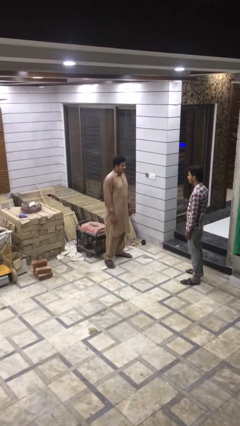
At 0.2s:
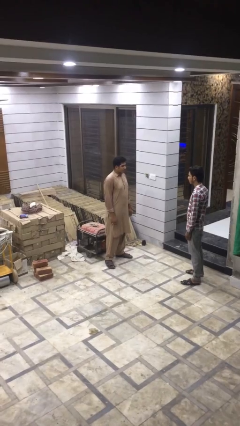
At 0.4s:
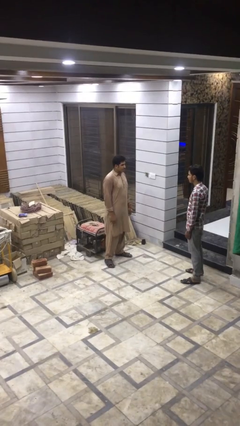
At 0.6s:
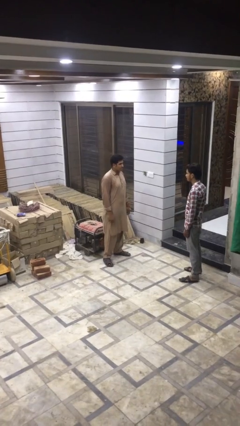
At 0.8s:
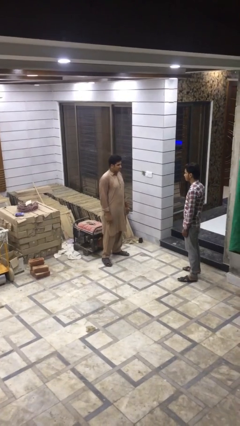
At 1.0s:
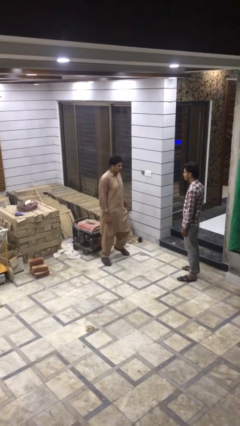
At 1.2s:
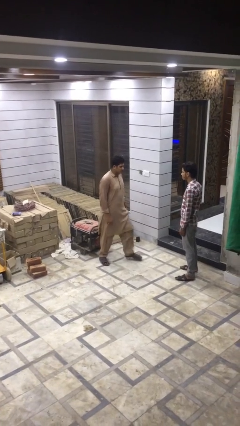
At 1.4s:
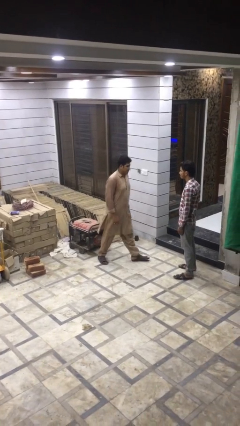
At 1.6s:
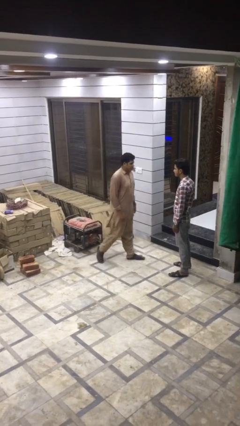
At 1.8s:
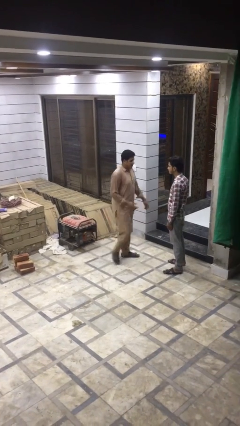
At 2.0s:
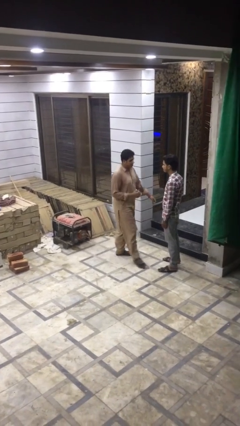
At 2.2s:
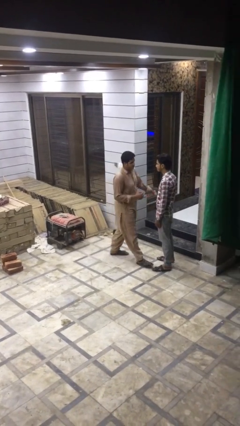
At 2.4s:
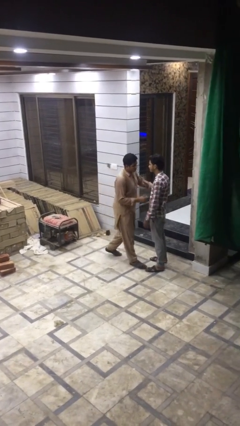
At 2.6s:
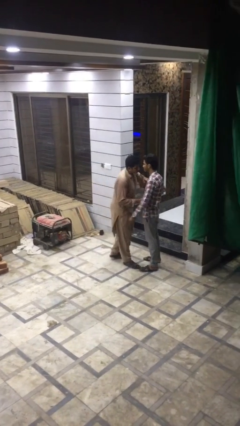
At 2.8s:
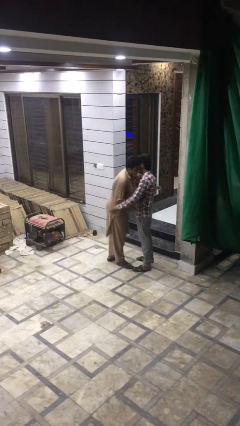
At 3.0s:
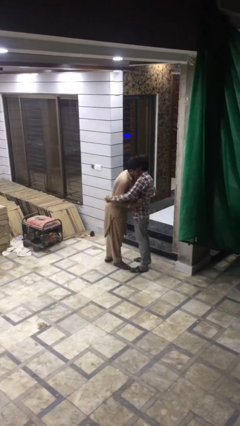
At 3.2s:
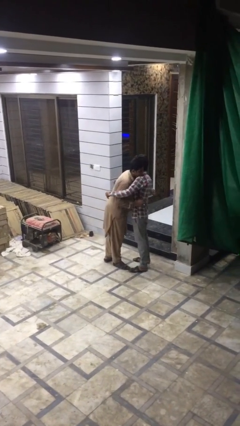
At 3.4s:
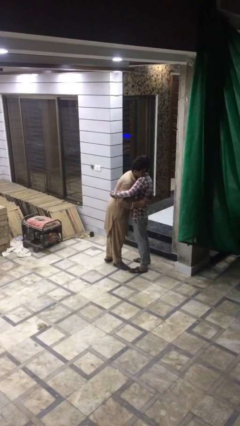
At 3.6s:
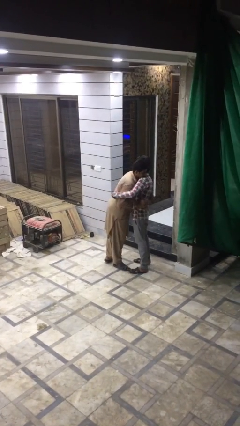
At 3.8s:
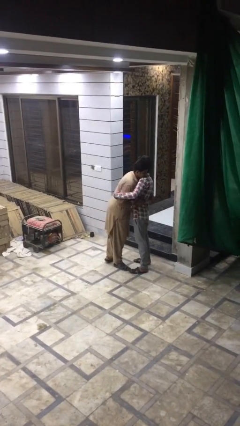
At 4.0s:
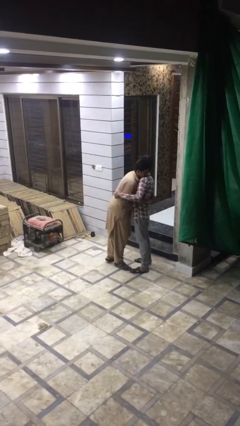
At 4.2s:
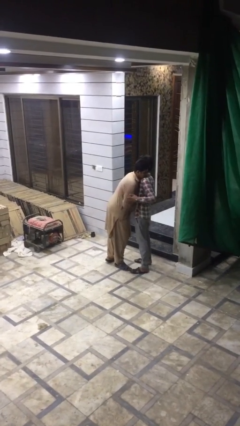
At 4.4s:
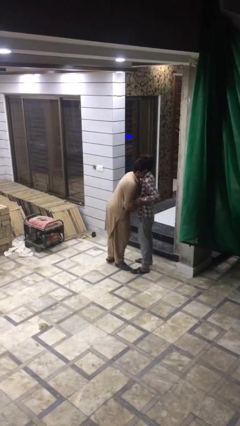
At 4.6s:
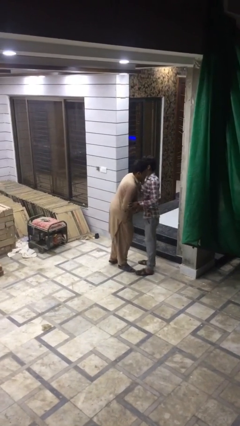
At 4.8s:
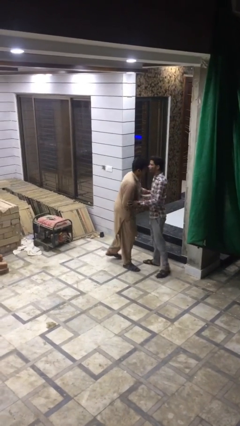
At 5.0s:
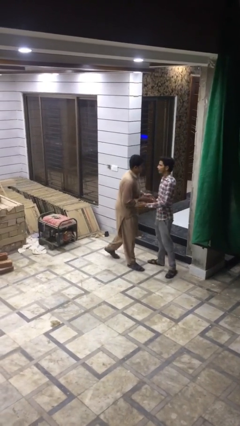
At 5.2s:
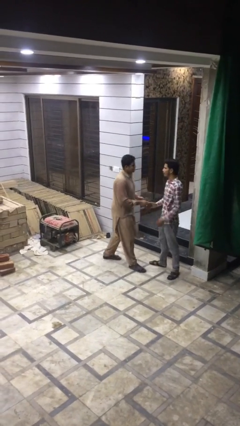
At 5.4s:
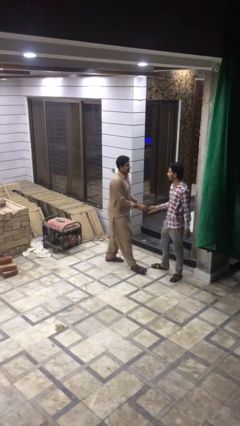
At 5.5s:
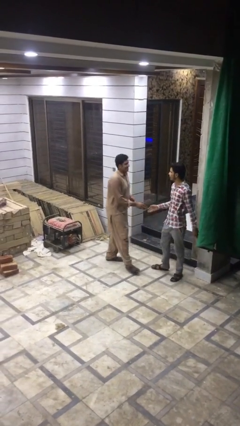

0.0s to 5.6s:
person embraces person

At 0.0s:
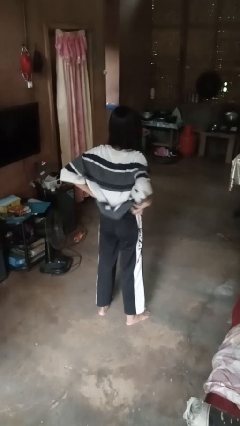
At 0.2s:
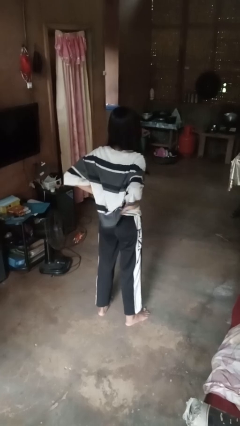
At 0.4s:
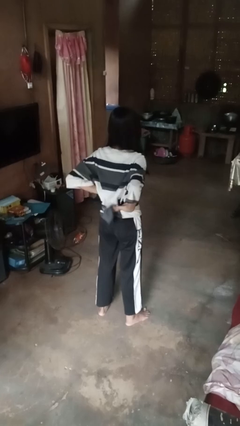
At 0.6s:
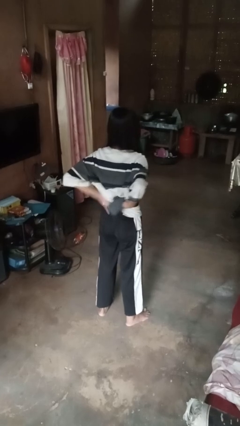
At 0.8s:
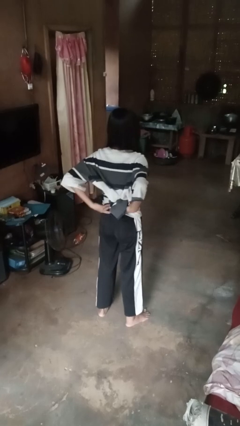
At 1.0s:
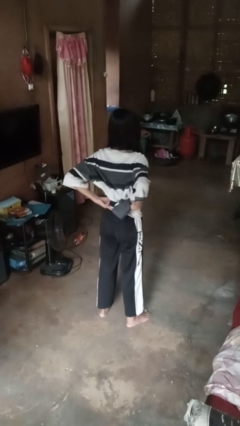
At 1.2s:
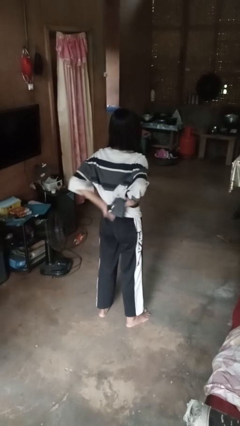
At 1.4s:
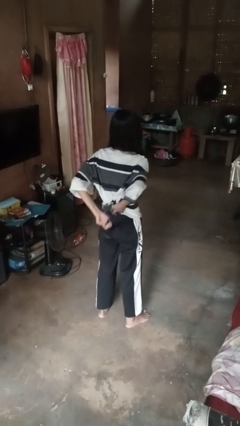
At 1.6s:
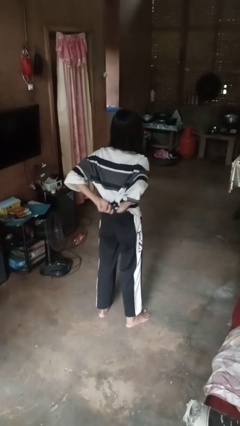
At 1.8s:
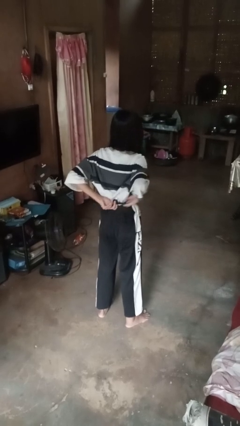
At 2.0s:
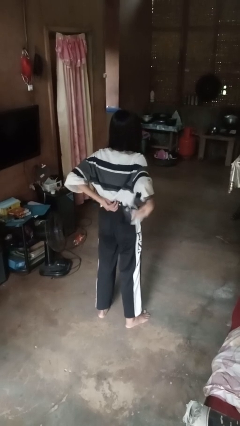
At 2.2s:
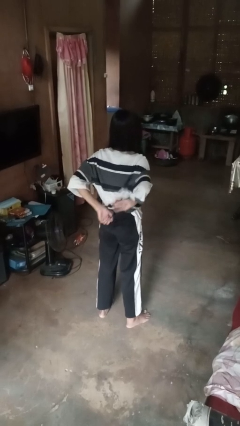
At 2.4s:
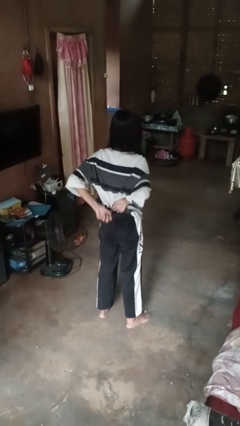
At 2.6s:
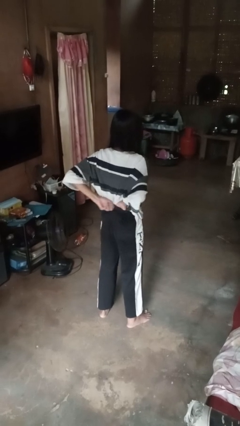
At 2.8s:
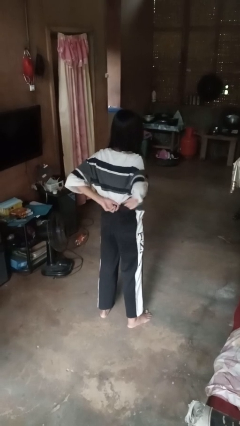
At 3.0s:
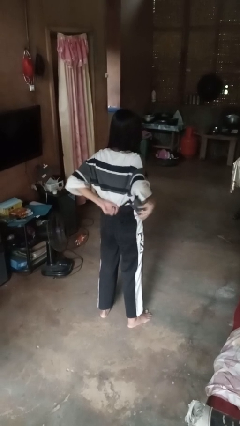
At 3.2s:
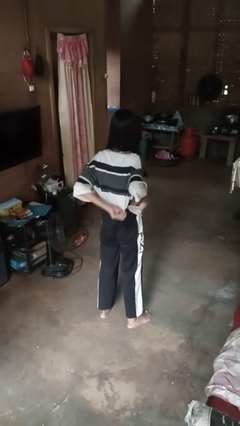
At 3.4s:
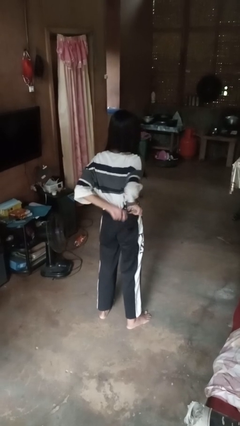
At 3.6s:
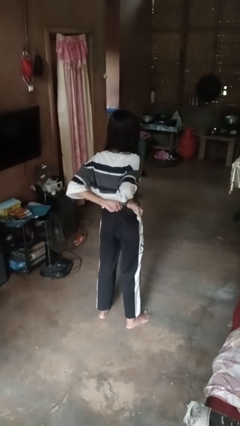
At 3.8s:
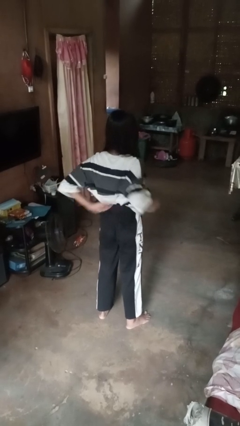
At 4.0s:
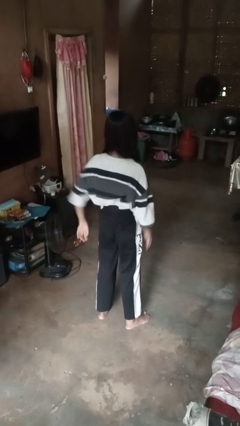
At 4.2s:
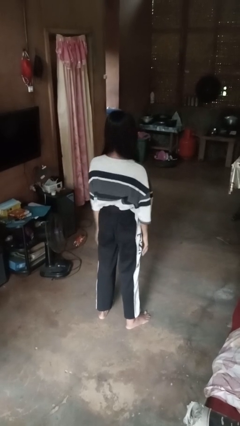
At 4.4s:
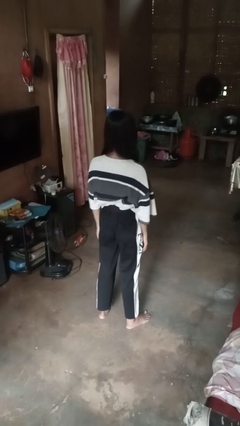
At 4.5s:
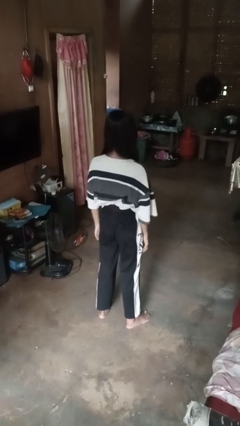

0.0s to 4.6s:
person tucks in shirt

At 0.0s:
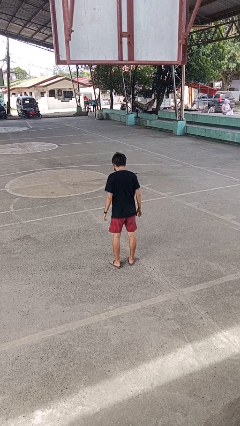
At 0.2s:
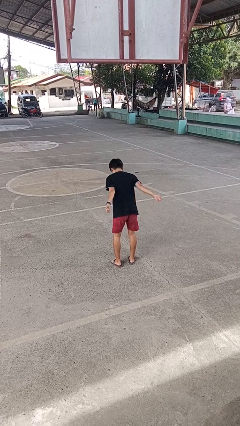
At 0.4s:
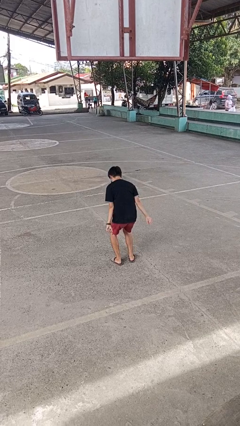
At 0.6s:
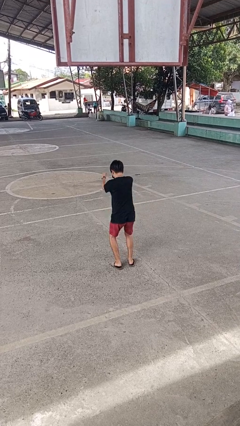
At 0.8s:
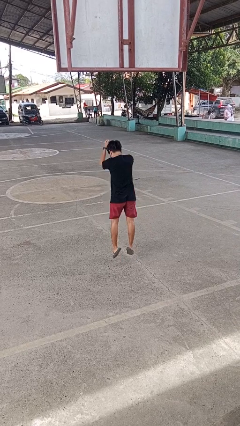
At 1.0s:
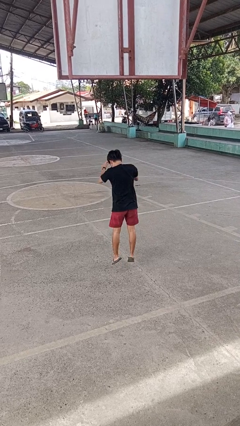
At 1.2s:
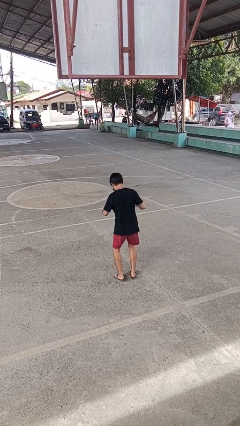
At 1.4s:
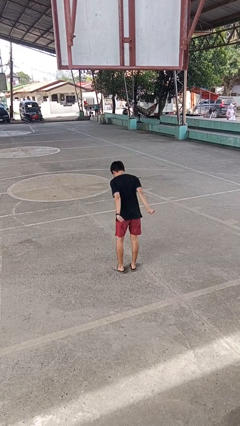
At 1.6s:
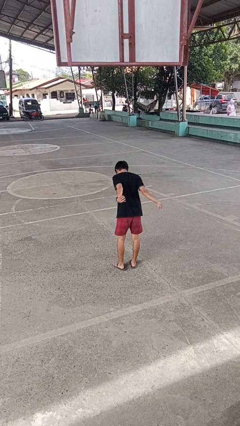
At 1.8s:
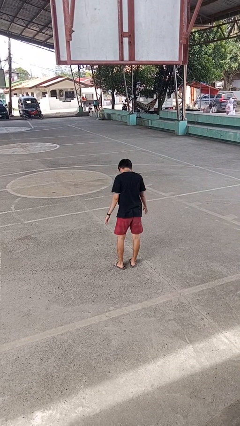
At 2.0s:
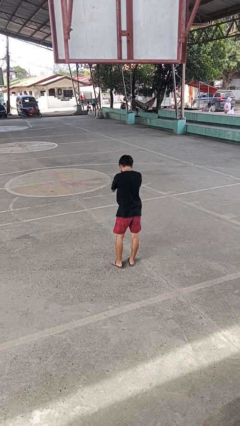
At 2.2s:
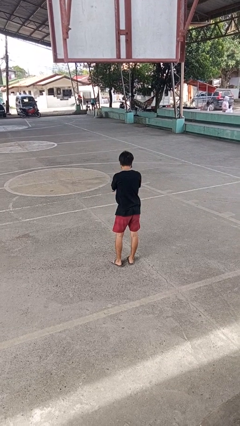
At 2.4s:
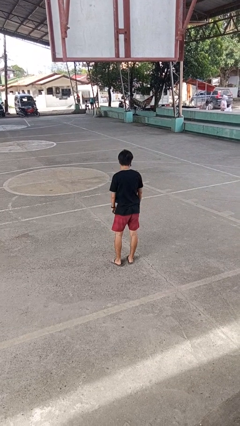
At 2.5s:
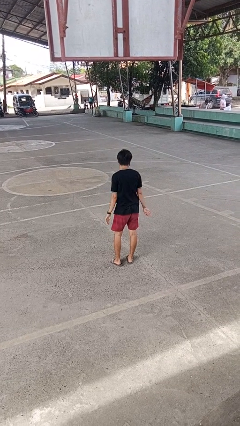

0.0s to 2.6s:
person jumps

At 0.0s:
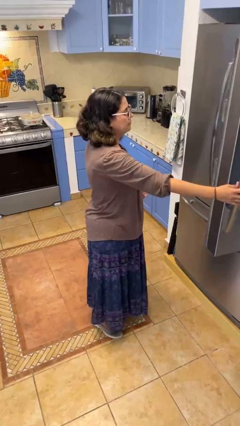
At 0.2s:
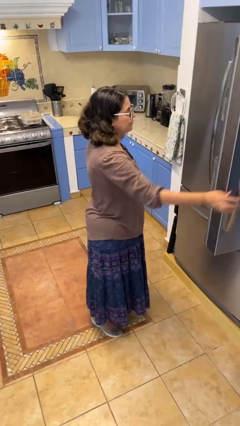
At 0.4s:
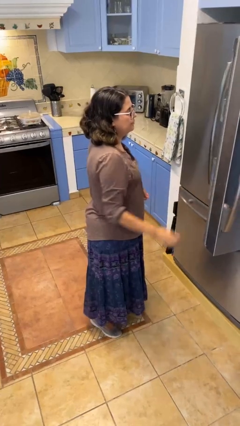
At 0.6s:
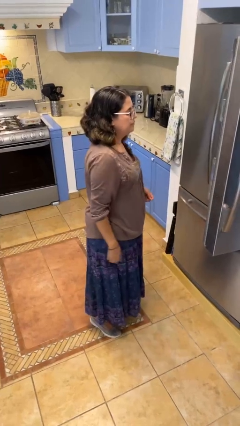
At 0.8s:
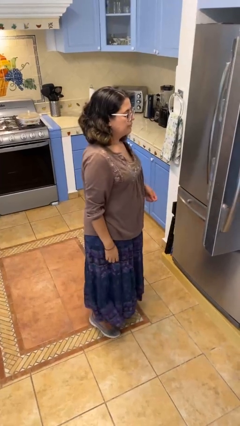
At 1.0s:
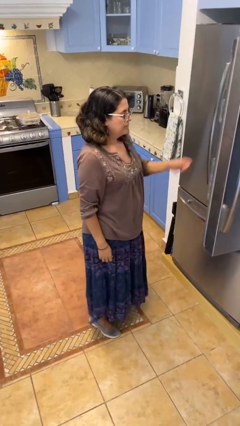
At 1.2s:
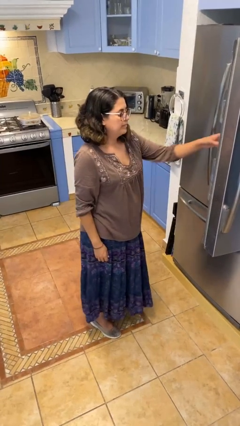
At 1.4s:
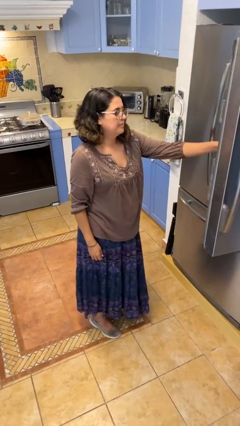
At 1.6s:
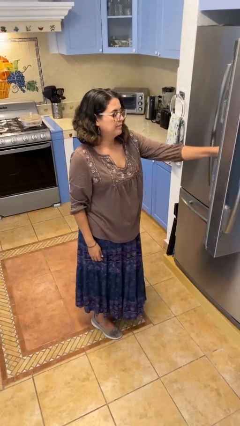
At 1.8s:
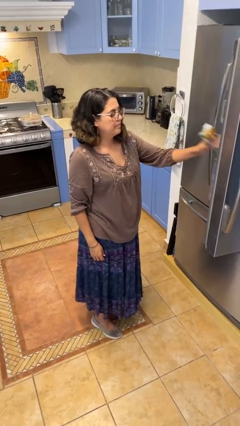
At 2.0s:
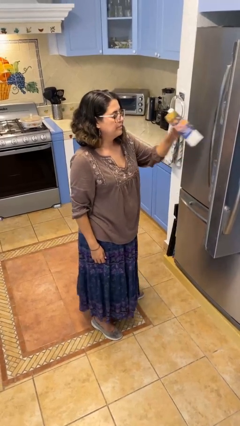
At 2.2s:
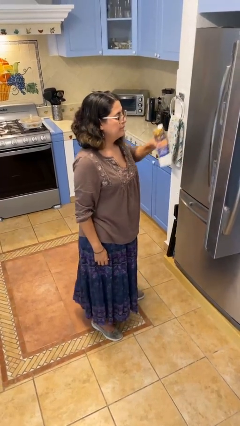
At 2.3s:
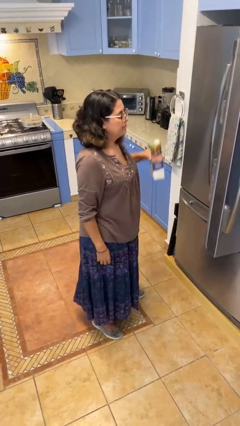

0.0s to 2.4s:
person takes object from refrigerator

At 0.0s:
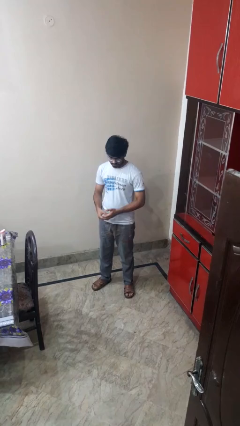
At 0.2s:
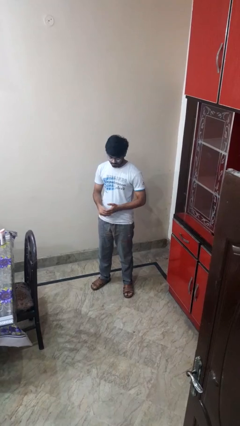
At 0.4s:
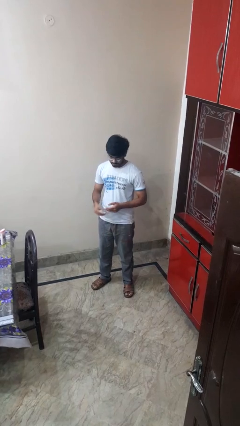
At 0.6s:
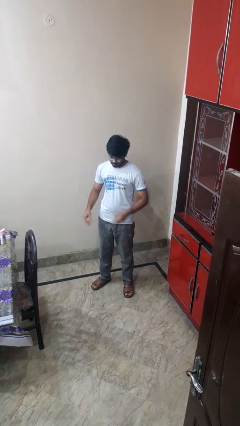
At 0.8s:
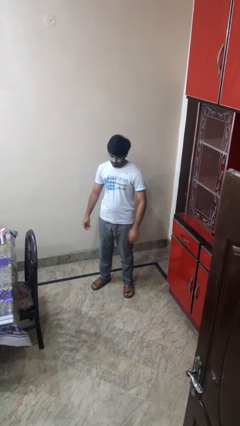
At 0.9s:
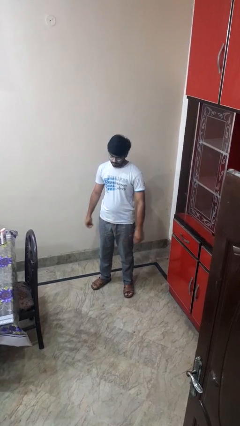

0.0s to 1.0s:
person takes off ring

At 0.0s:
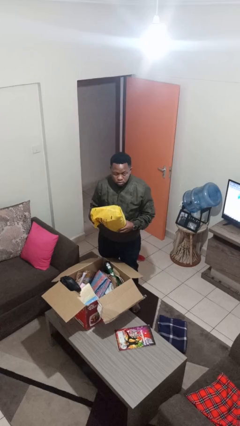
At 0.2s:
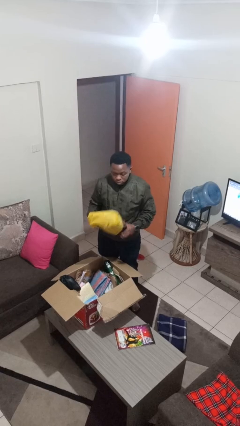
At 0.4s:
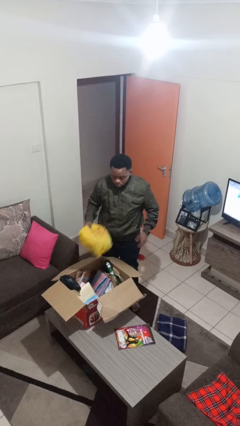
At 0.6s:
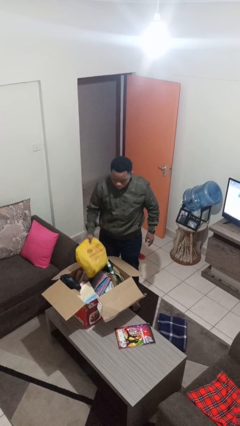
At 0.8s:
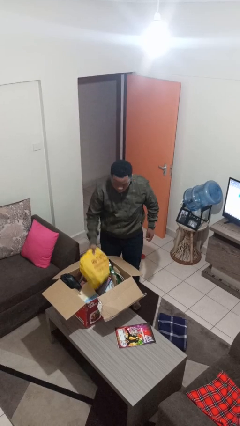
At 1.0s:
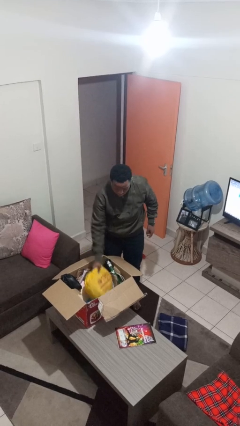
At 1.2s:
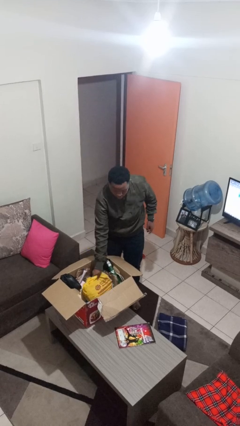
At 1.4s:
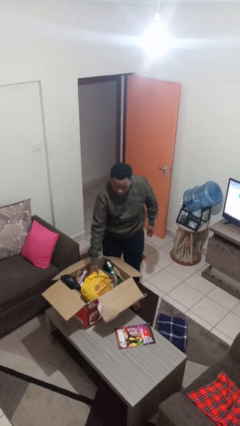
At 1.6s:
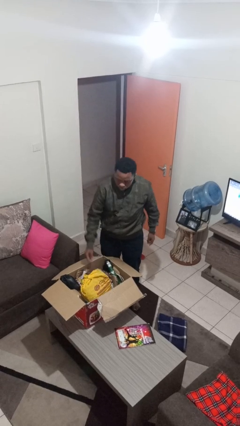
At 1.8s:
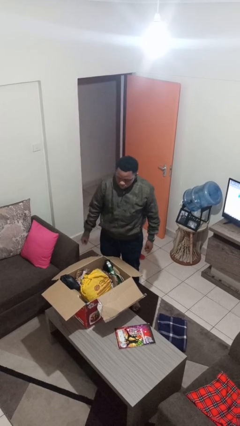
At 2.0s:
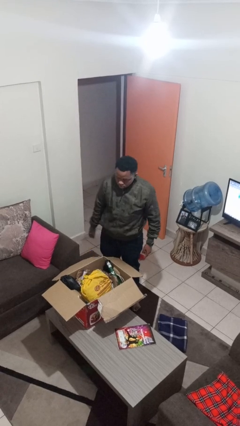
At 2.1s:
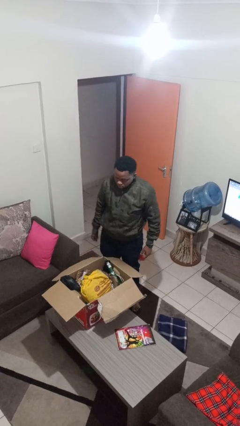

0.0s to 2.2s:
person puts object into box
